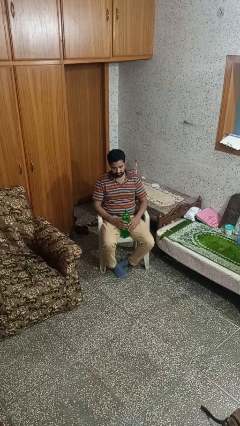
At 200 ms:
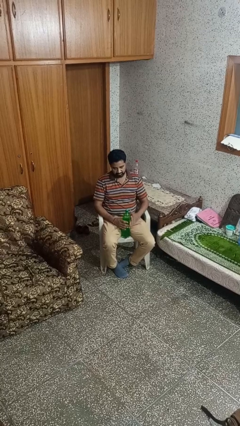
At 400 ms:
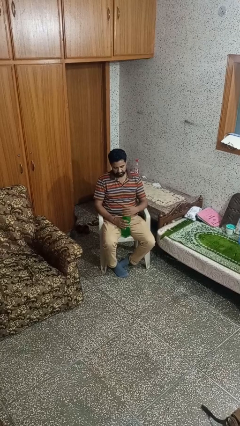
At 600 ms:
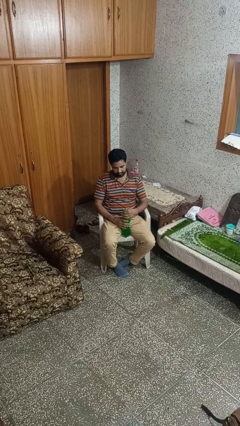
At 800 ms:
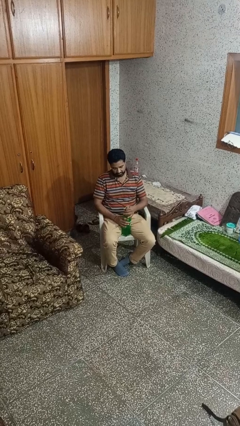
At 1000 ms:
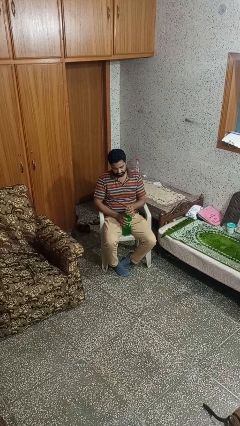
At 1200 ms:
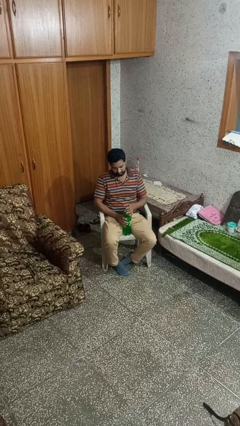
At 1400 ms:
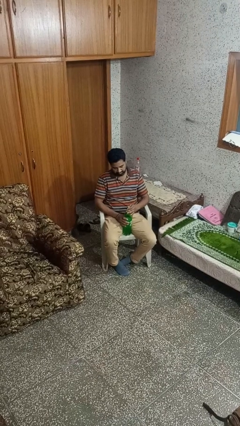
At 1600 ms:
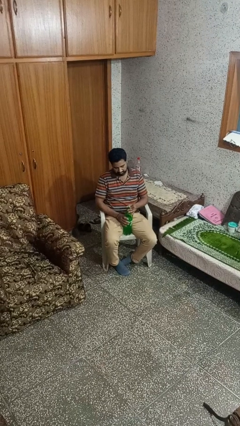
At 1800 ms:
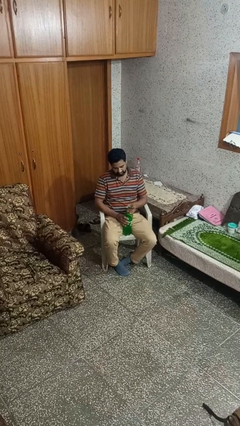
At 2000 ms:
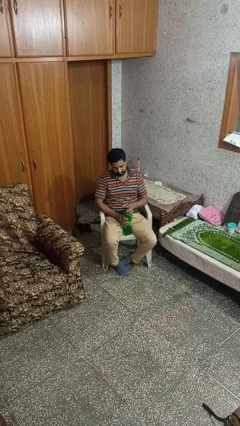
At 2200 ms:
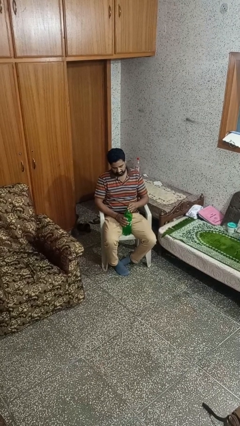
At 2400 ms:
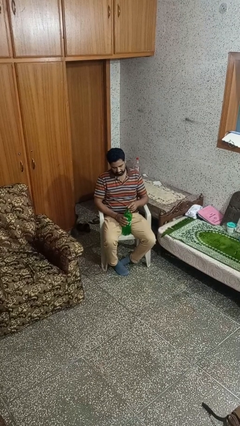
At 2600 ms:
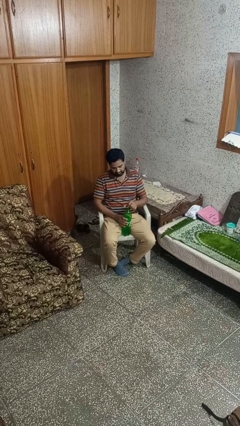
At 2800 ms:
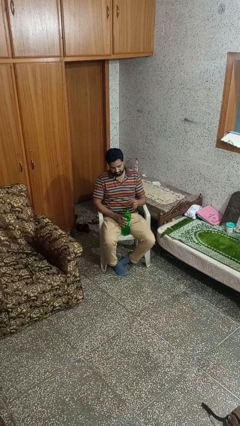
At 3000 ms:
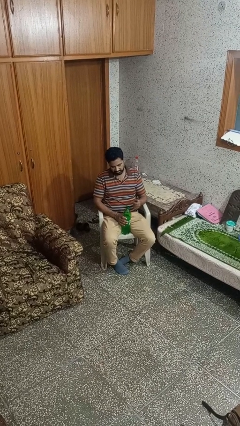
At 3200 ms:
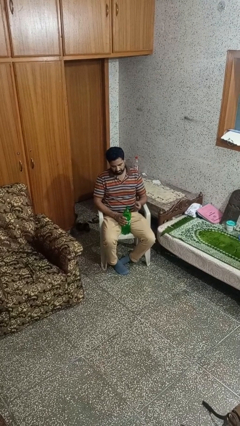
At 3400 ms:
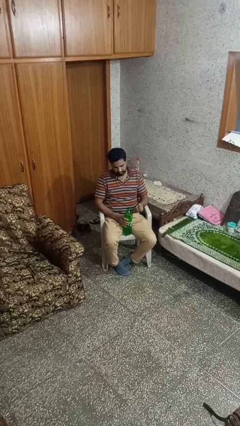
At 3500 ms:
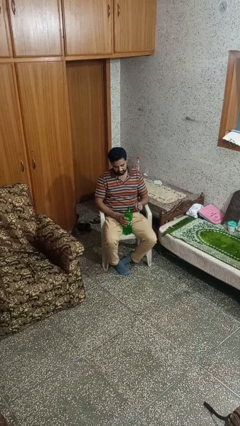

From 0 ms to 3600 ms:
person unscrews lid from bottle

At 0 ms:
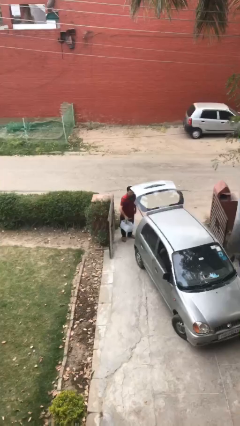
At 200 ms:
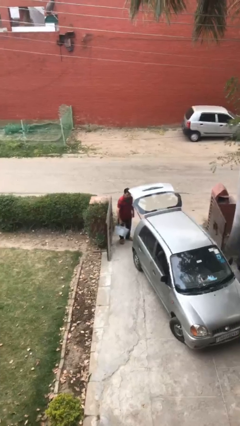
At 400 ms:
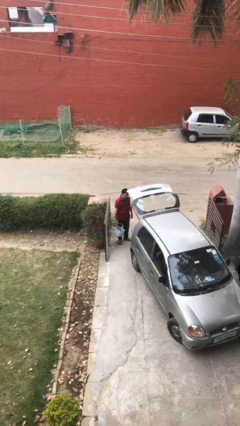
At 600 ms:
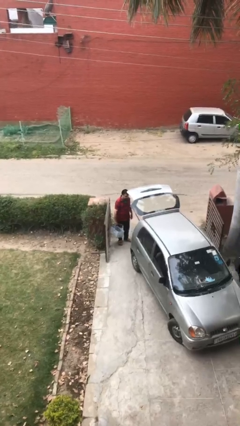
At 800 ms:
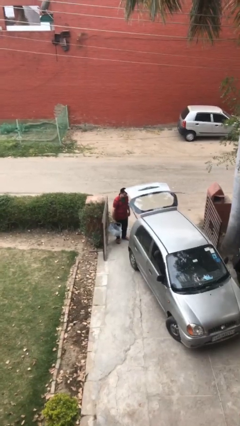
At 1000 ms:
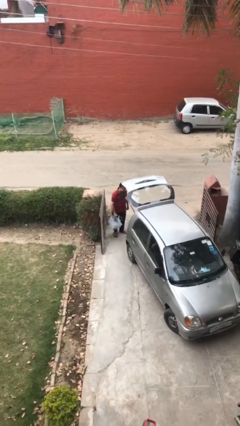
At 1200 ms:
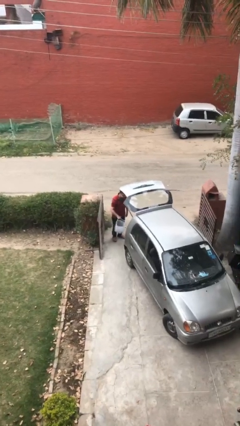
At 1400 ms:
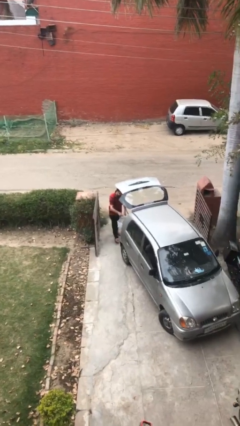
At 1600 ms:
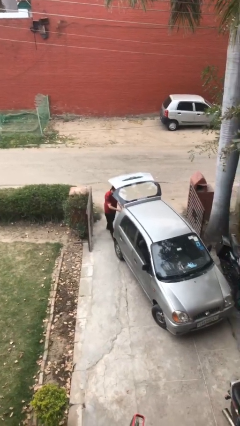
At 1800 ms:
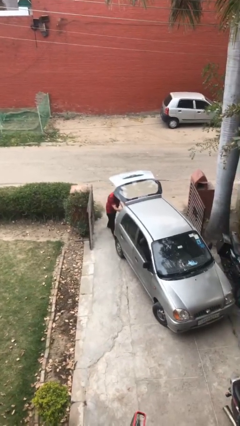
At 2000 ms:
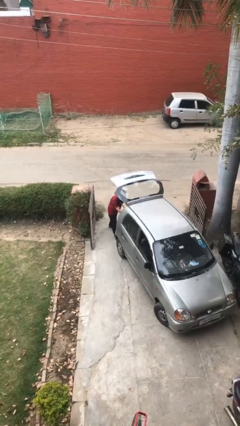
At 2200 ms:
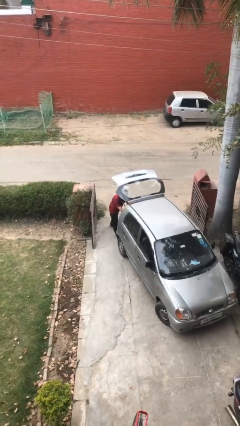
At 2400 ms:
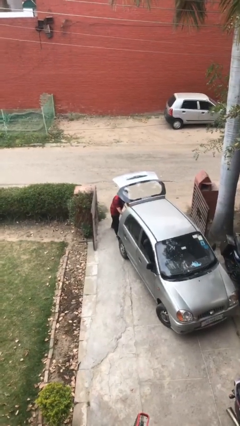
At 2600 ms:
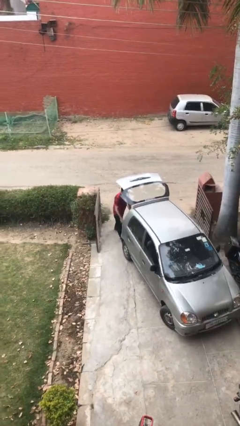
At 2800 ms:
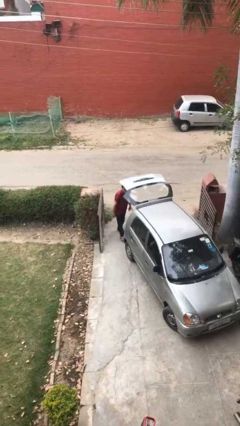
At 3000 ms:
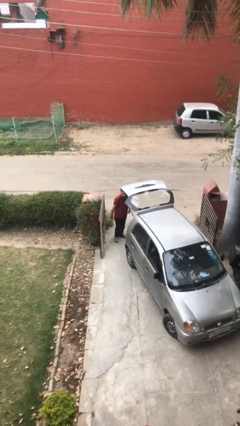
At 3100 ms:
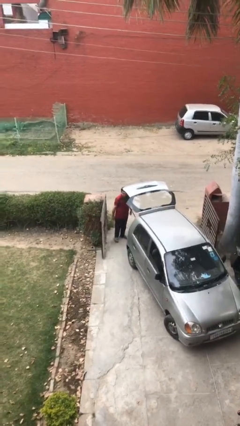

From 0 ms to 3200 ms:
person loads car

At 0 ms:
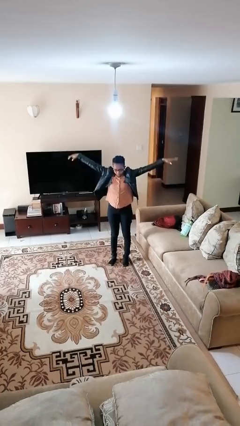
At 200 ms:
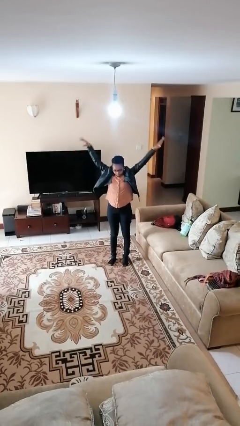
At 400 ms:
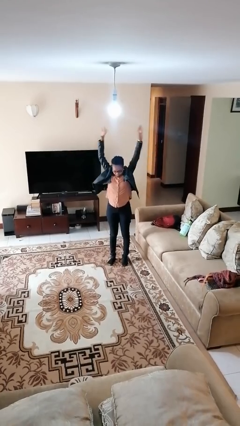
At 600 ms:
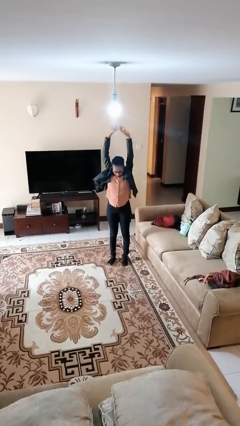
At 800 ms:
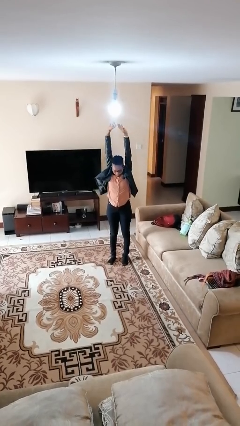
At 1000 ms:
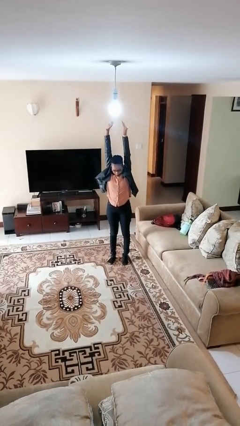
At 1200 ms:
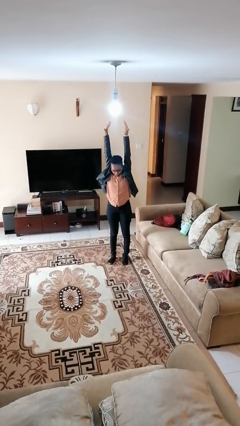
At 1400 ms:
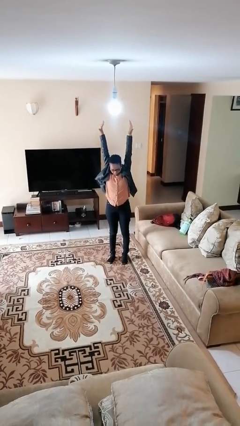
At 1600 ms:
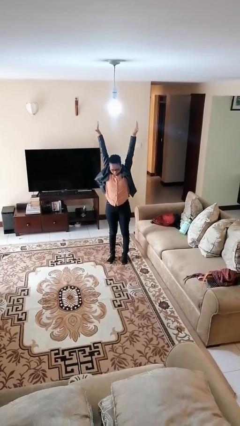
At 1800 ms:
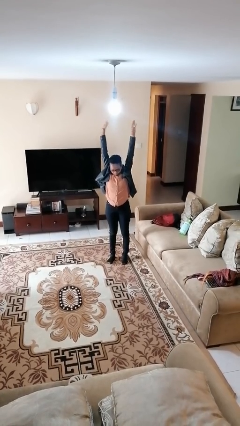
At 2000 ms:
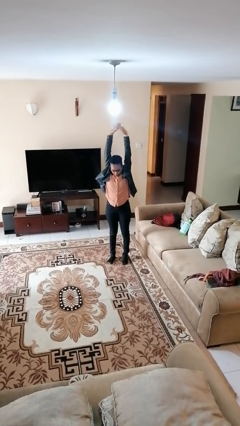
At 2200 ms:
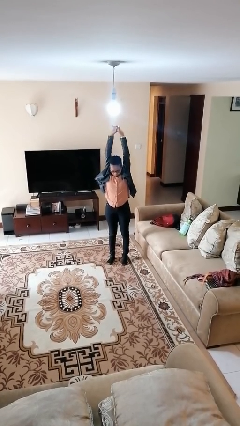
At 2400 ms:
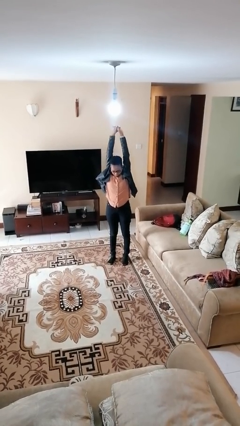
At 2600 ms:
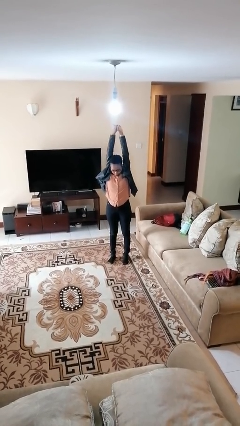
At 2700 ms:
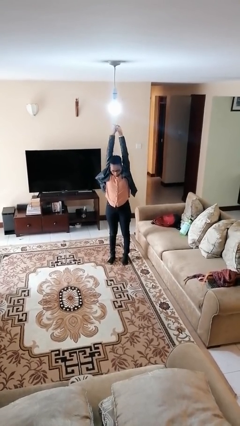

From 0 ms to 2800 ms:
person stretches arms over head

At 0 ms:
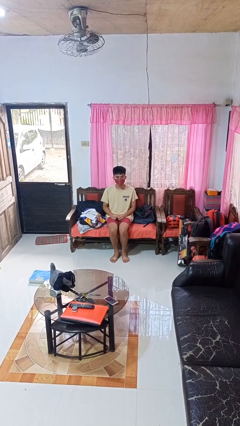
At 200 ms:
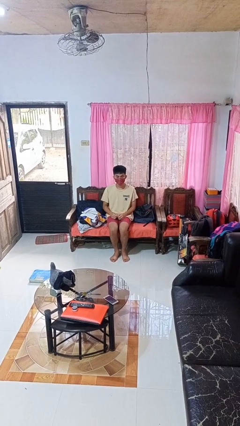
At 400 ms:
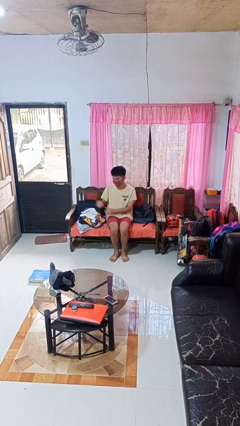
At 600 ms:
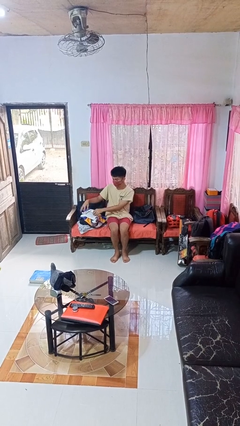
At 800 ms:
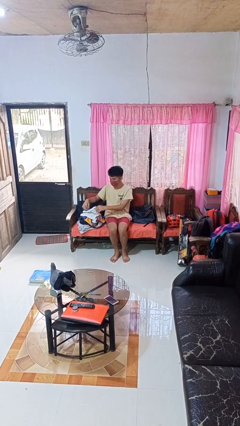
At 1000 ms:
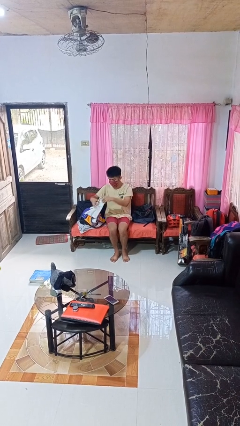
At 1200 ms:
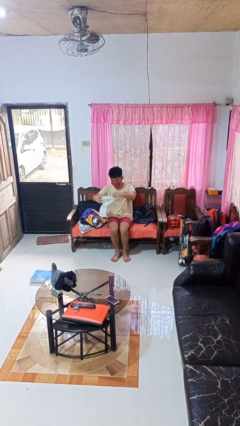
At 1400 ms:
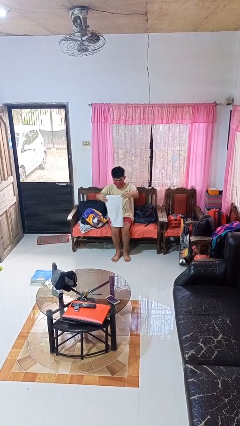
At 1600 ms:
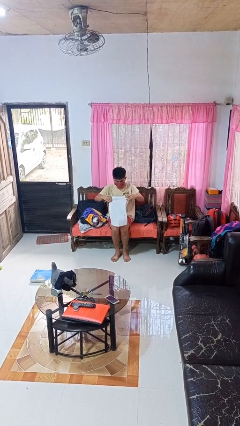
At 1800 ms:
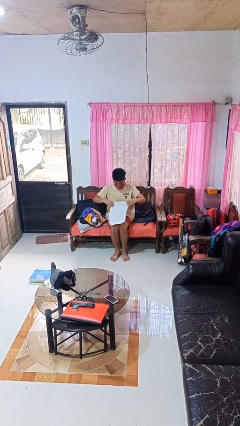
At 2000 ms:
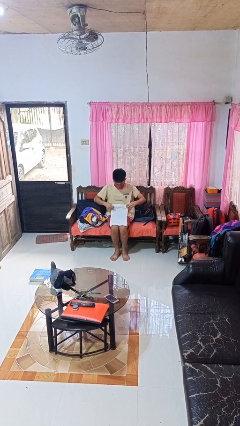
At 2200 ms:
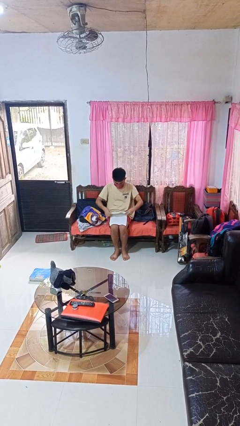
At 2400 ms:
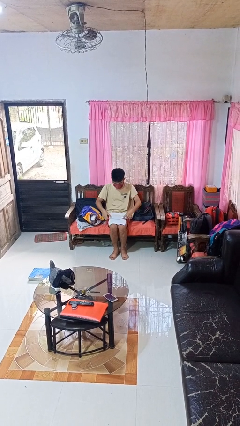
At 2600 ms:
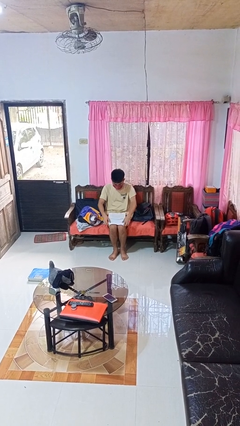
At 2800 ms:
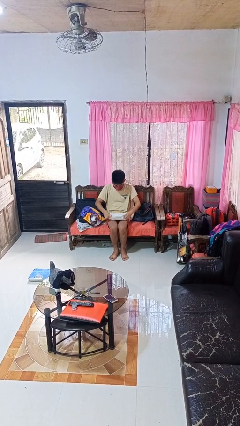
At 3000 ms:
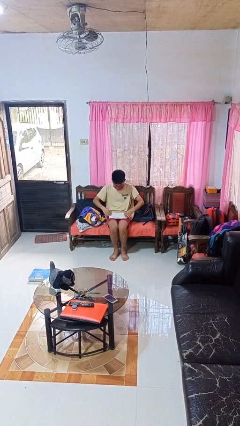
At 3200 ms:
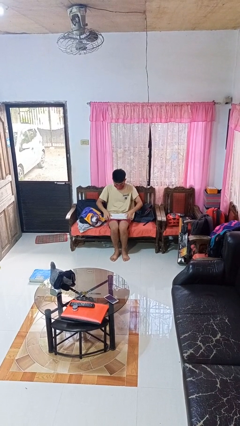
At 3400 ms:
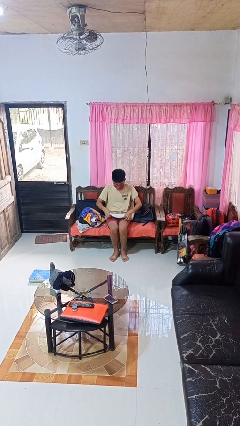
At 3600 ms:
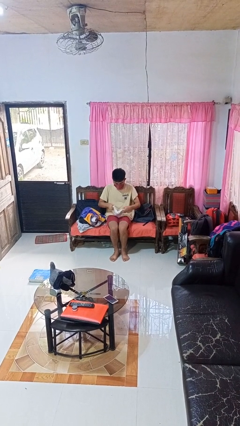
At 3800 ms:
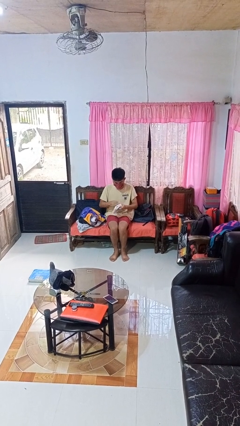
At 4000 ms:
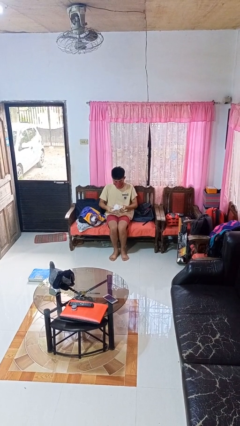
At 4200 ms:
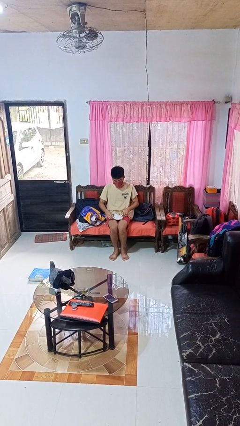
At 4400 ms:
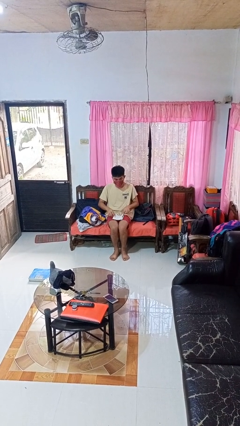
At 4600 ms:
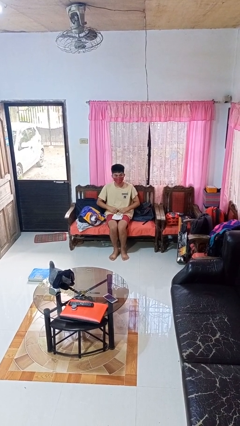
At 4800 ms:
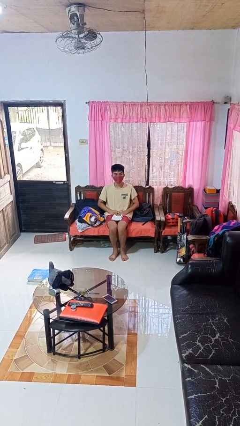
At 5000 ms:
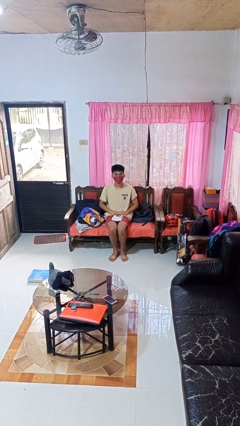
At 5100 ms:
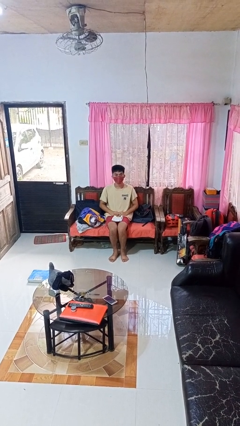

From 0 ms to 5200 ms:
person folds towel

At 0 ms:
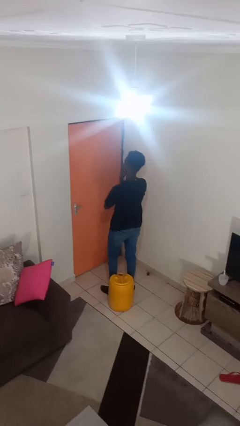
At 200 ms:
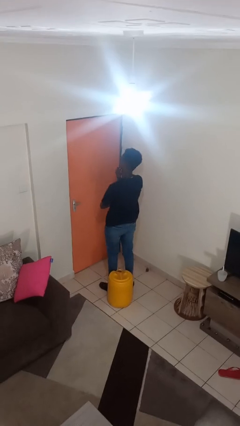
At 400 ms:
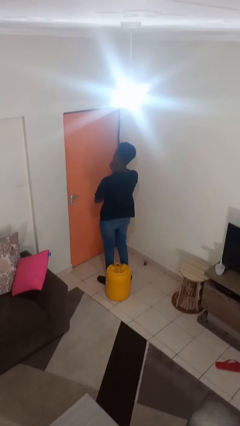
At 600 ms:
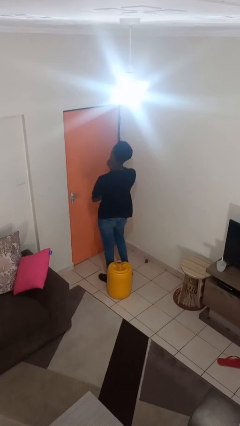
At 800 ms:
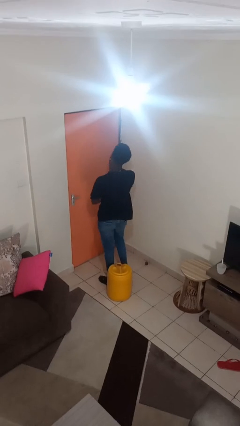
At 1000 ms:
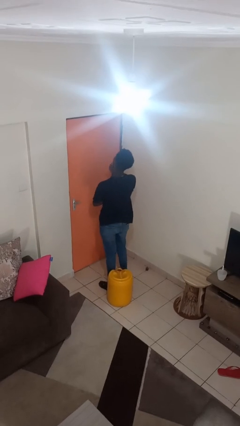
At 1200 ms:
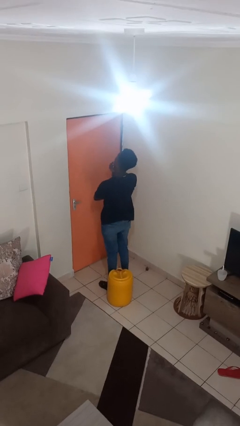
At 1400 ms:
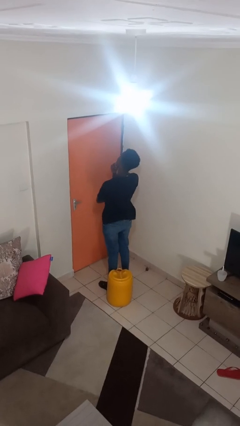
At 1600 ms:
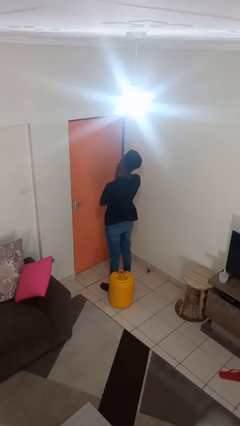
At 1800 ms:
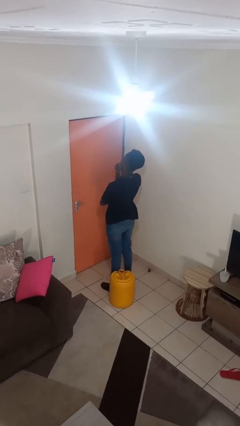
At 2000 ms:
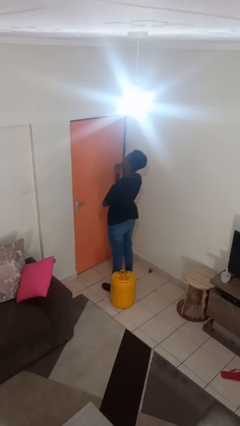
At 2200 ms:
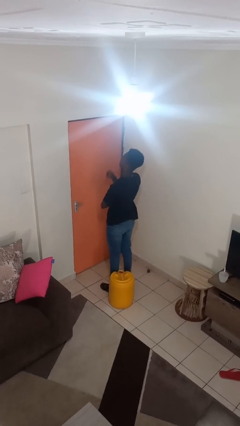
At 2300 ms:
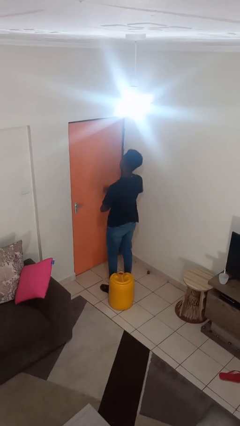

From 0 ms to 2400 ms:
person strokes chin
